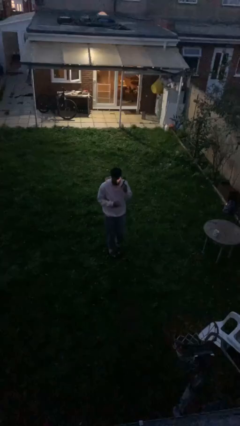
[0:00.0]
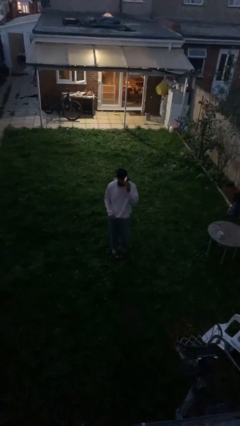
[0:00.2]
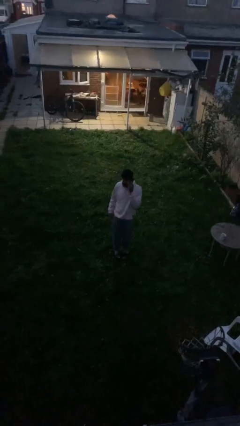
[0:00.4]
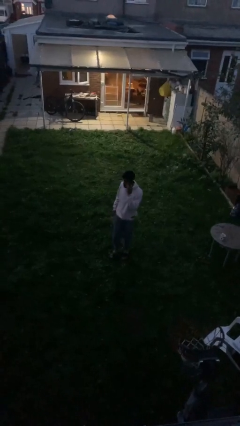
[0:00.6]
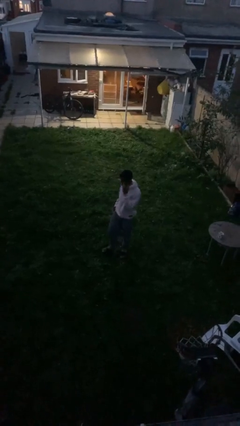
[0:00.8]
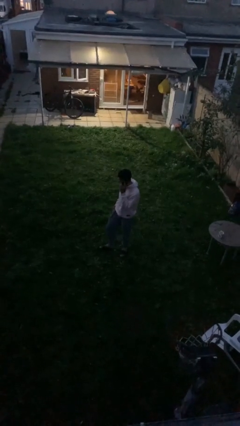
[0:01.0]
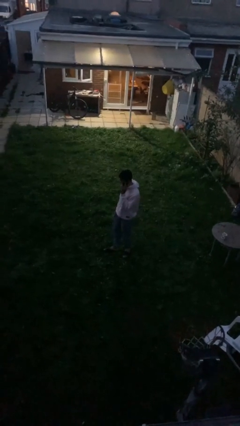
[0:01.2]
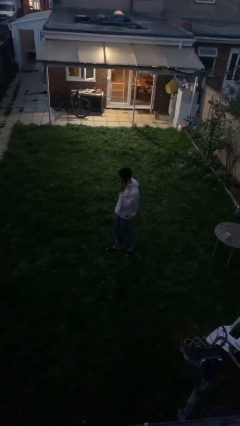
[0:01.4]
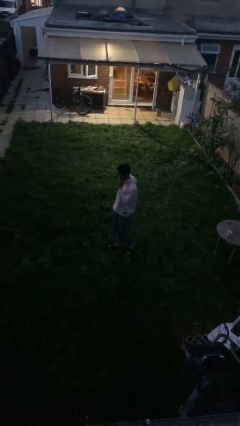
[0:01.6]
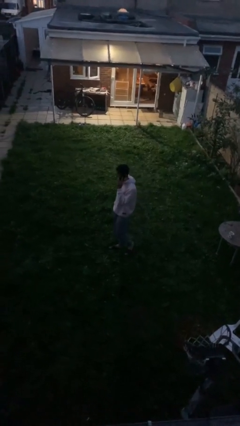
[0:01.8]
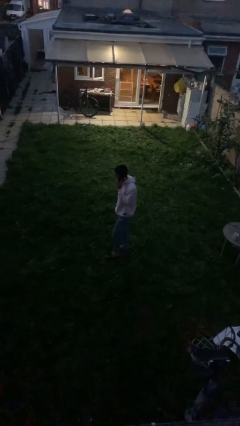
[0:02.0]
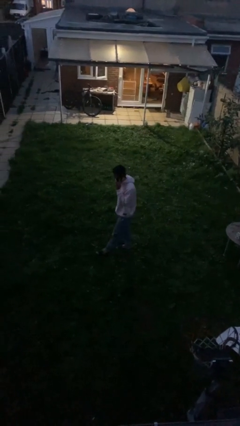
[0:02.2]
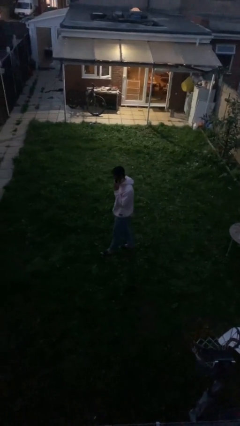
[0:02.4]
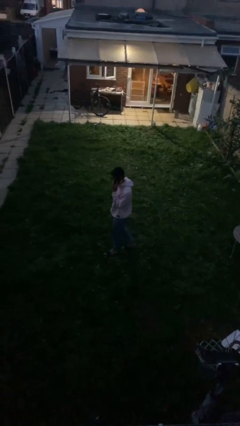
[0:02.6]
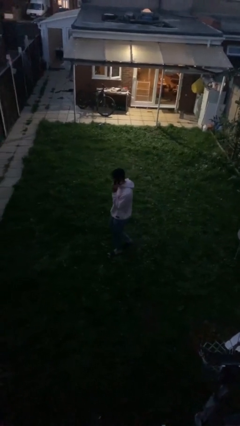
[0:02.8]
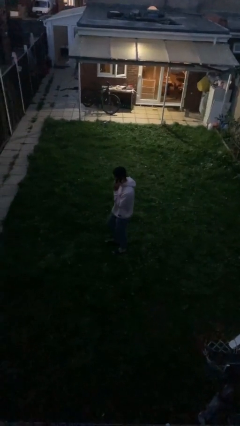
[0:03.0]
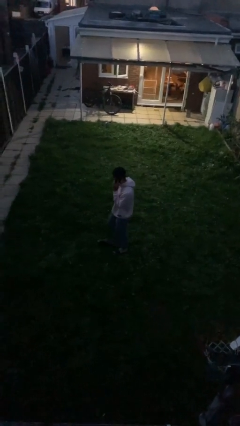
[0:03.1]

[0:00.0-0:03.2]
person talks on phone

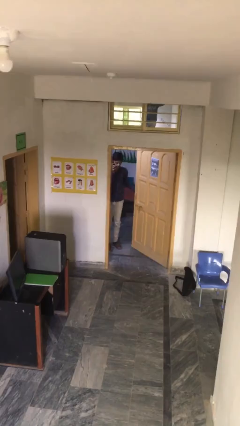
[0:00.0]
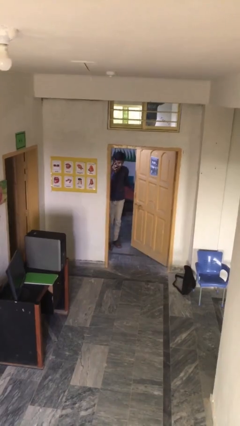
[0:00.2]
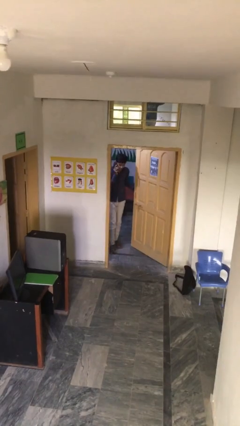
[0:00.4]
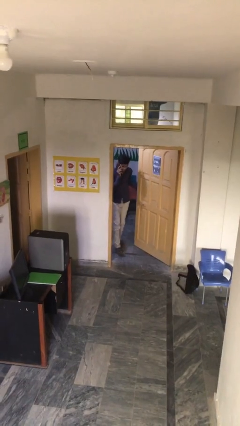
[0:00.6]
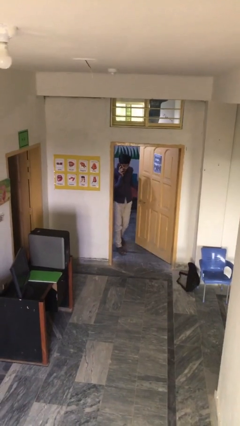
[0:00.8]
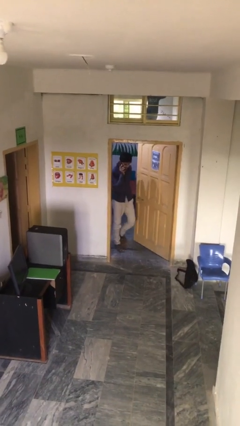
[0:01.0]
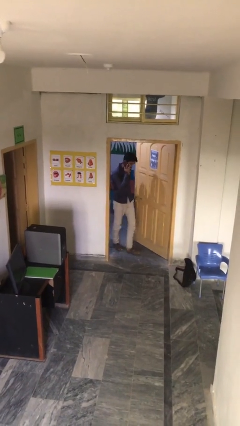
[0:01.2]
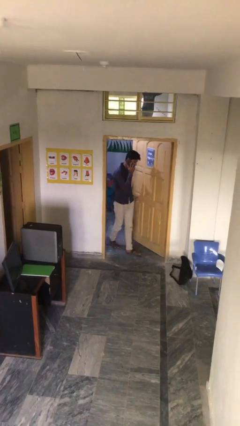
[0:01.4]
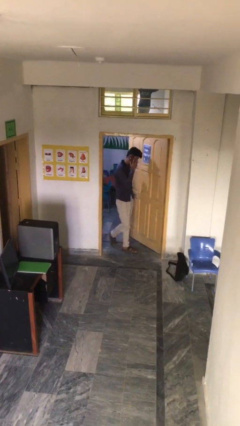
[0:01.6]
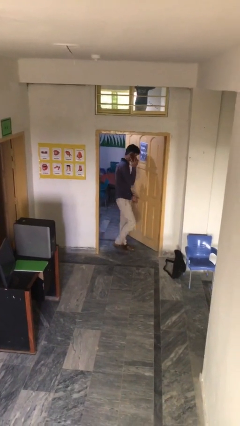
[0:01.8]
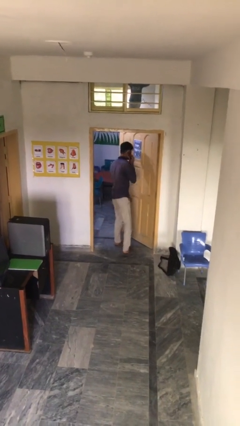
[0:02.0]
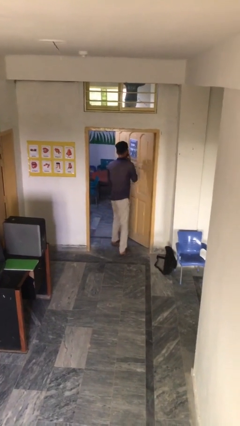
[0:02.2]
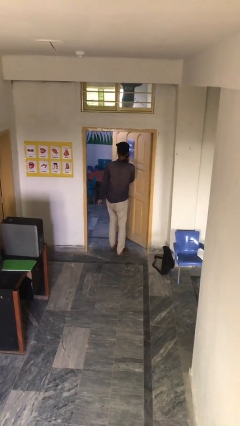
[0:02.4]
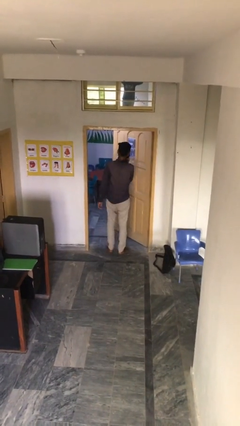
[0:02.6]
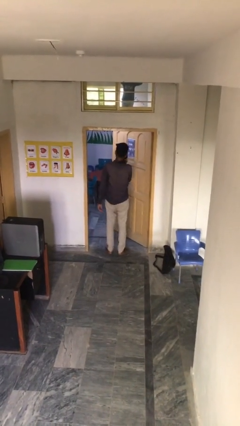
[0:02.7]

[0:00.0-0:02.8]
person enters scene through structure

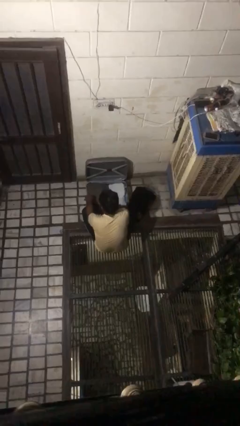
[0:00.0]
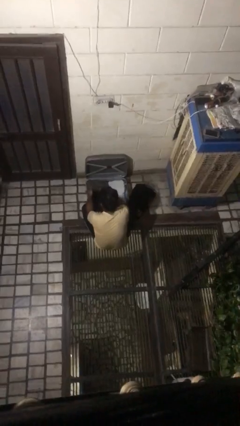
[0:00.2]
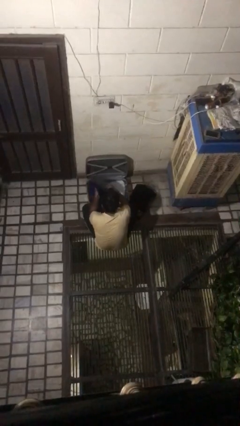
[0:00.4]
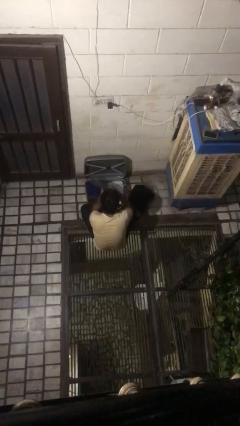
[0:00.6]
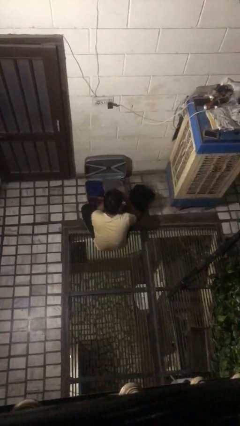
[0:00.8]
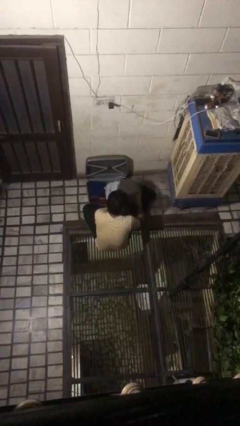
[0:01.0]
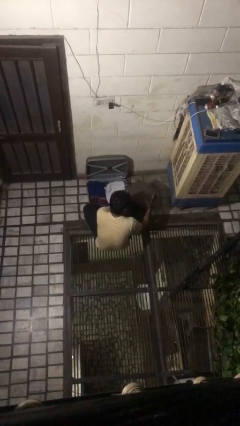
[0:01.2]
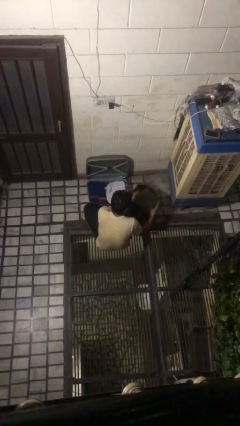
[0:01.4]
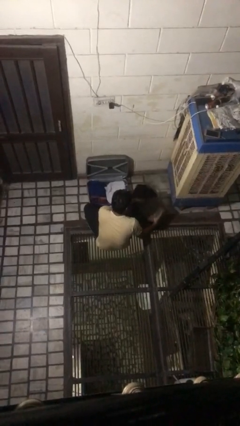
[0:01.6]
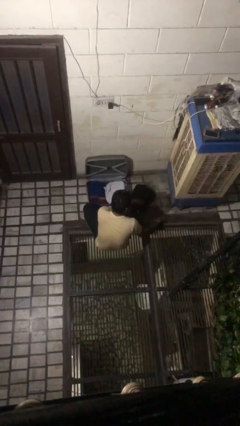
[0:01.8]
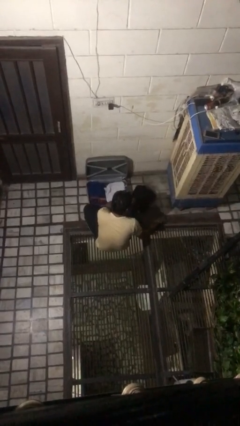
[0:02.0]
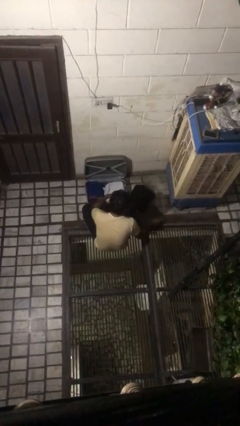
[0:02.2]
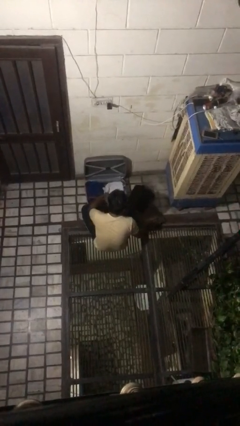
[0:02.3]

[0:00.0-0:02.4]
person unloads clothes from suitcase

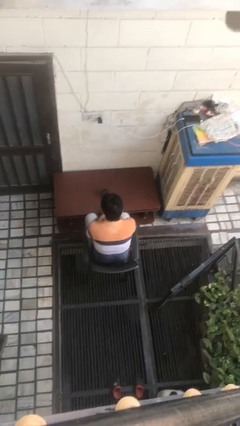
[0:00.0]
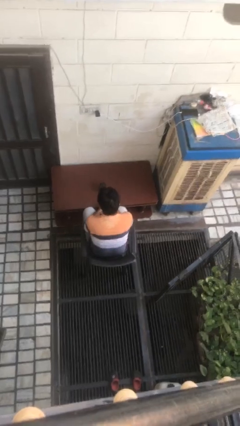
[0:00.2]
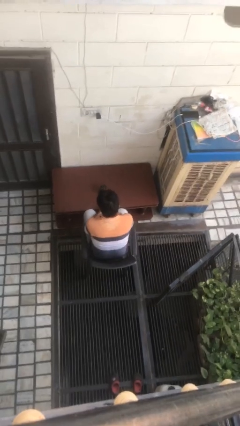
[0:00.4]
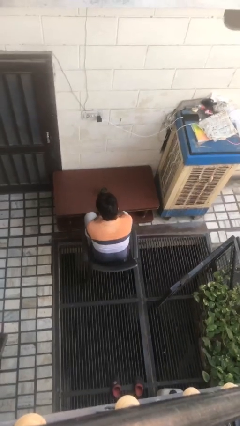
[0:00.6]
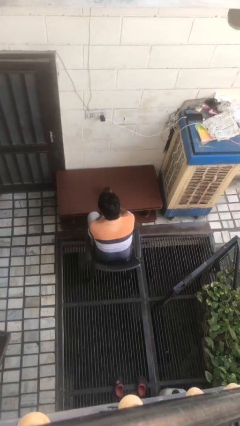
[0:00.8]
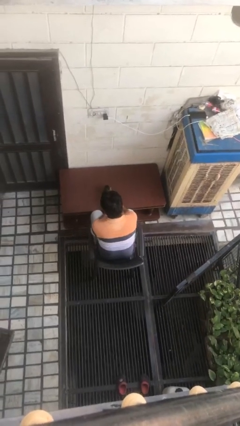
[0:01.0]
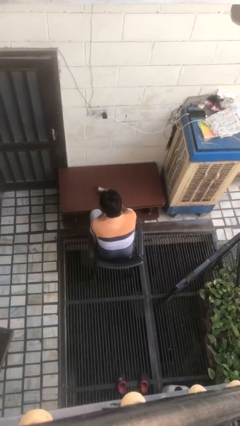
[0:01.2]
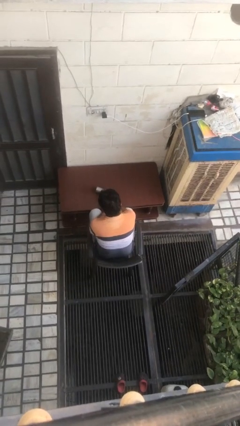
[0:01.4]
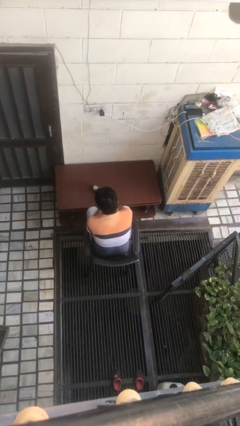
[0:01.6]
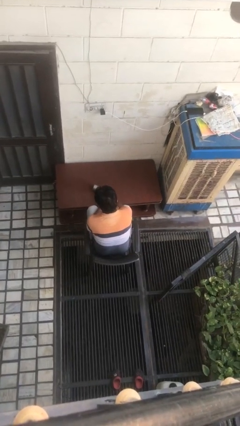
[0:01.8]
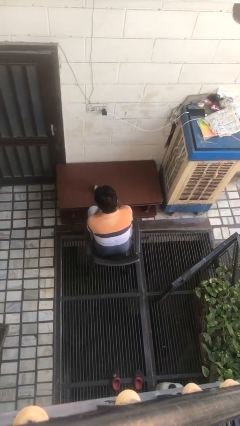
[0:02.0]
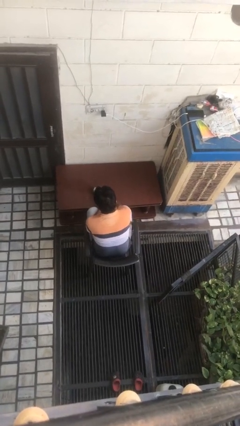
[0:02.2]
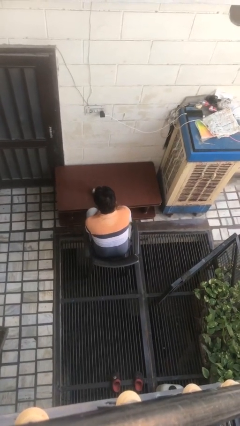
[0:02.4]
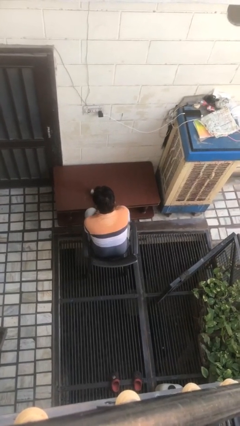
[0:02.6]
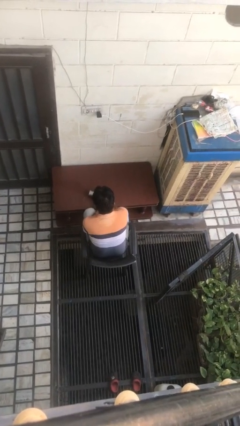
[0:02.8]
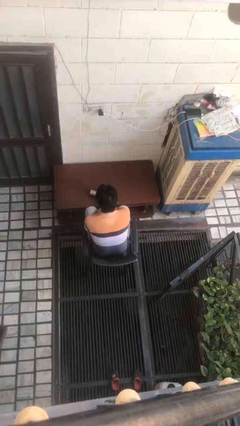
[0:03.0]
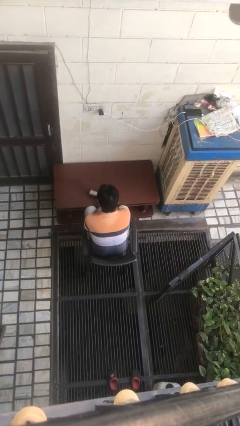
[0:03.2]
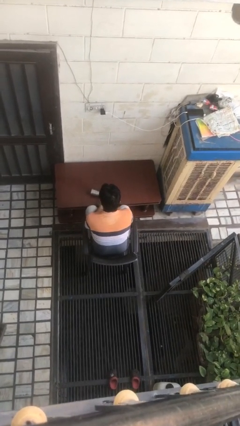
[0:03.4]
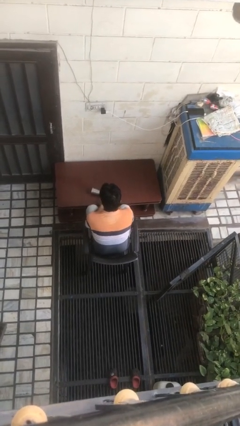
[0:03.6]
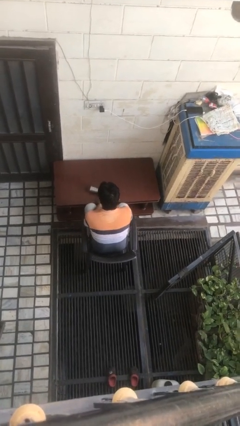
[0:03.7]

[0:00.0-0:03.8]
person spills on table

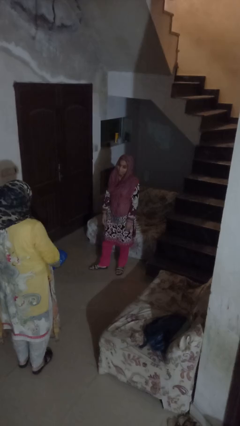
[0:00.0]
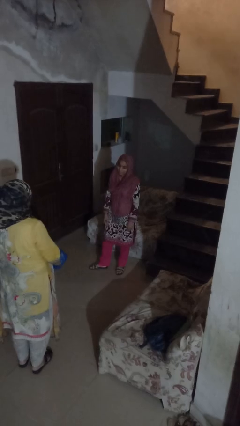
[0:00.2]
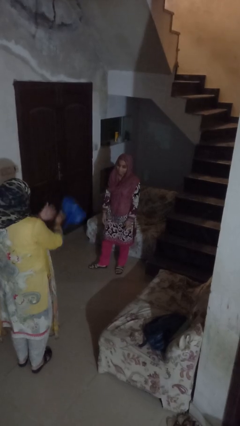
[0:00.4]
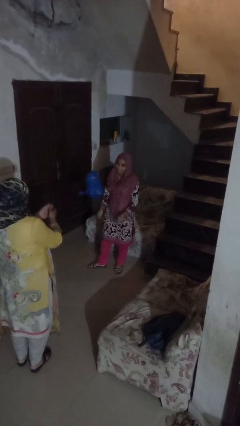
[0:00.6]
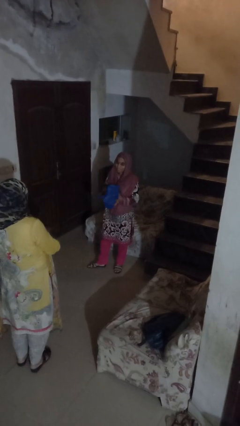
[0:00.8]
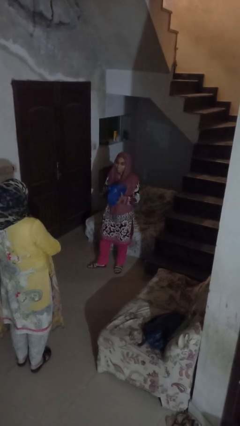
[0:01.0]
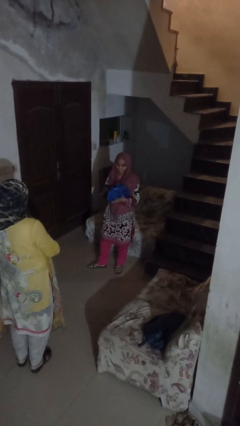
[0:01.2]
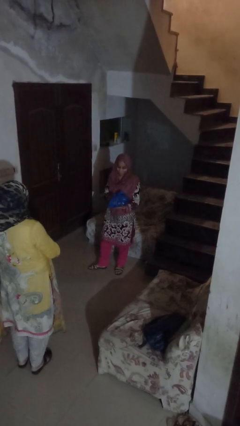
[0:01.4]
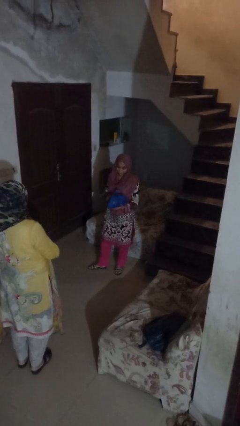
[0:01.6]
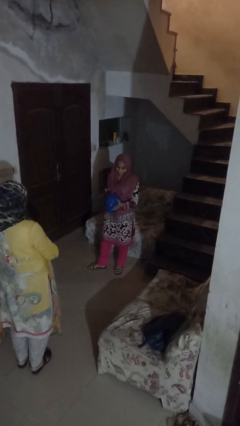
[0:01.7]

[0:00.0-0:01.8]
person catches object from person

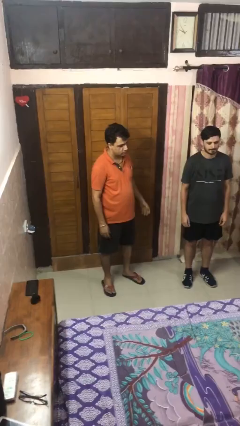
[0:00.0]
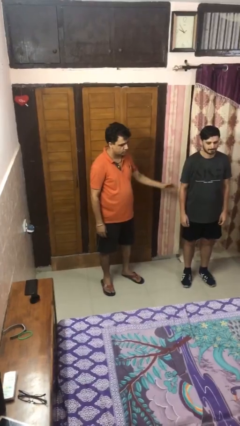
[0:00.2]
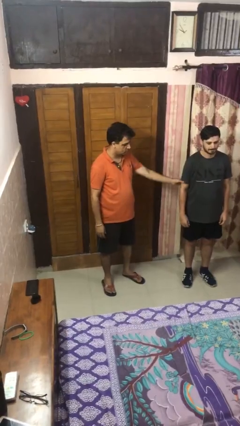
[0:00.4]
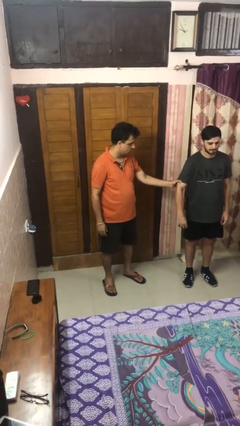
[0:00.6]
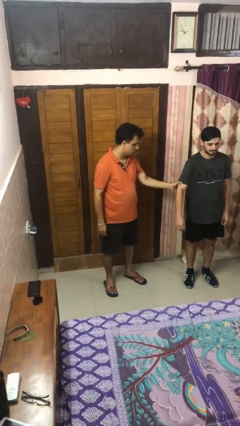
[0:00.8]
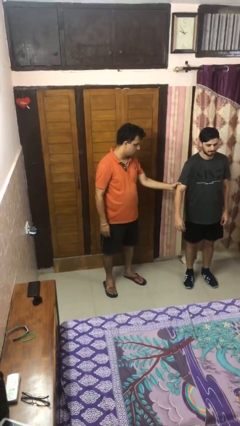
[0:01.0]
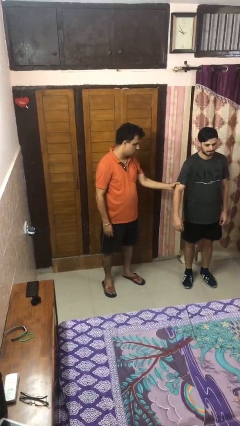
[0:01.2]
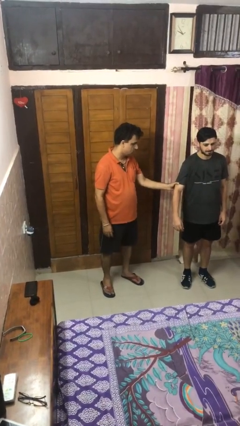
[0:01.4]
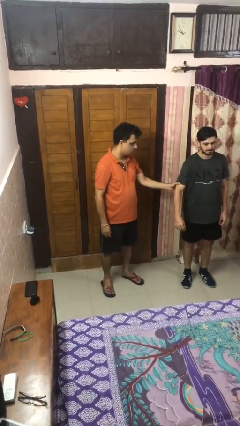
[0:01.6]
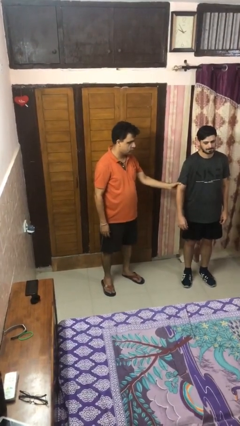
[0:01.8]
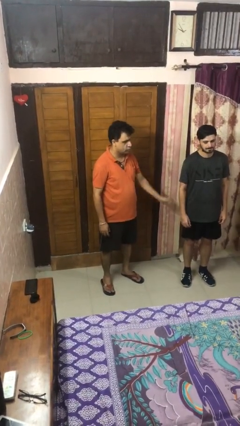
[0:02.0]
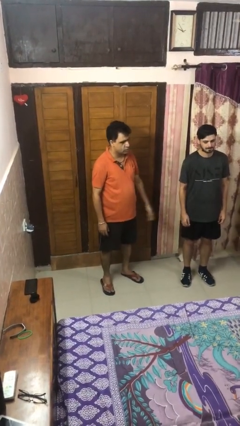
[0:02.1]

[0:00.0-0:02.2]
person grabs person by bicep

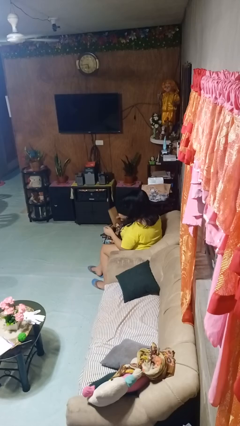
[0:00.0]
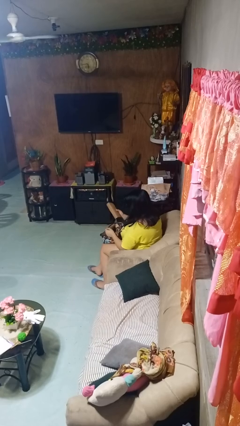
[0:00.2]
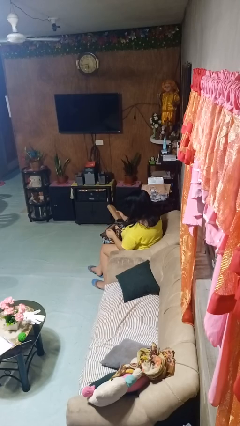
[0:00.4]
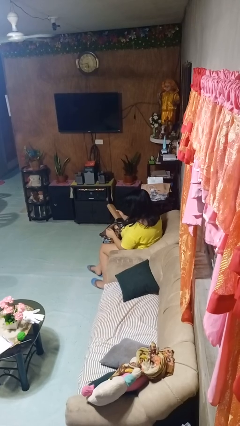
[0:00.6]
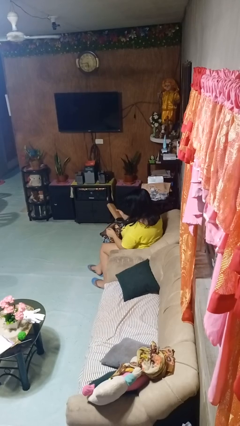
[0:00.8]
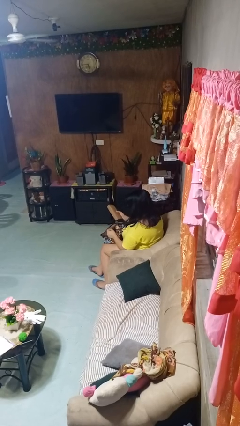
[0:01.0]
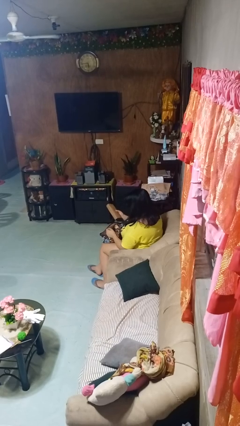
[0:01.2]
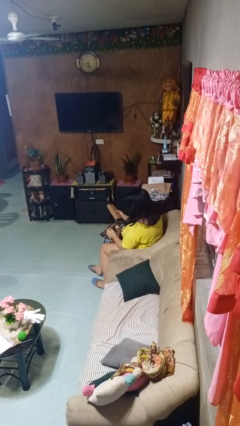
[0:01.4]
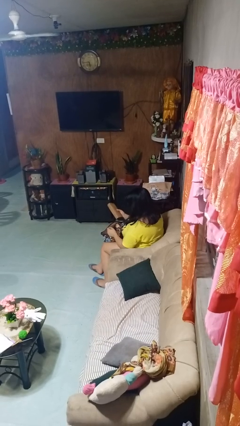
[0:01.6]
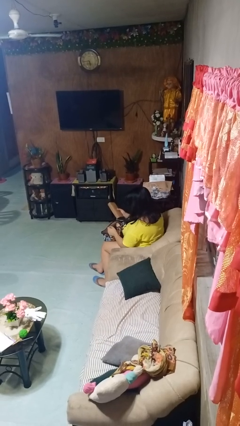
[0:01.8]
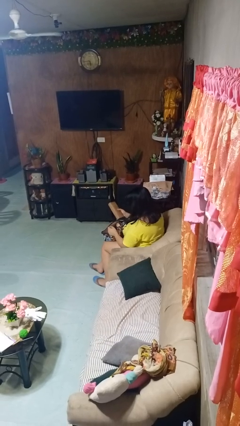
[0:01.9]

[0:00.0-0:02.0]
person takes object from backpack
